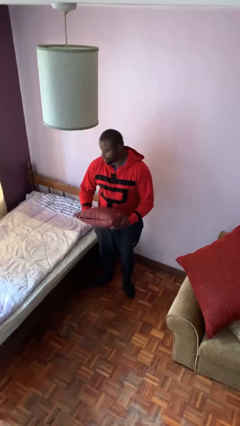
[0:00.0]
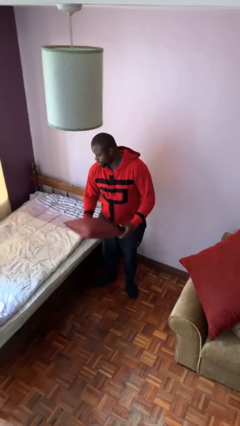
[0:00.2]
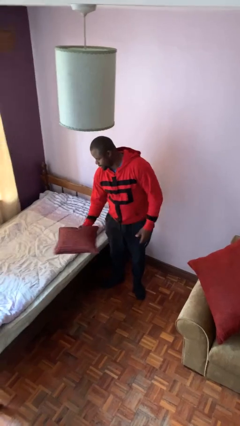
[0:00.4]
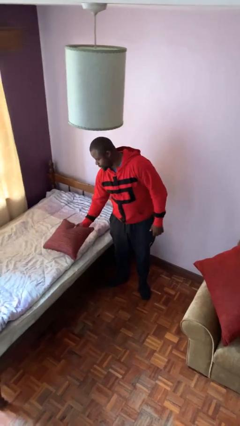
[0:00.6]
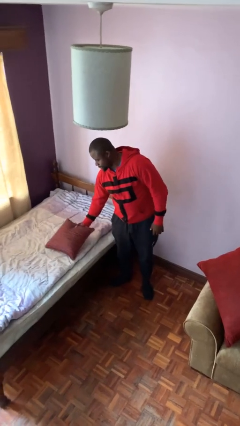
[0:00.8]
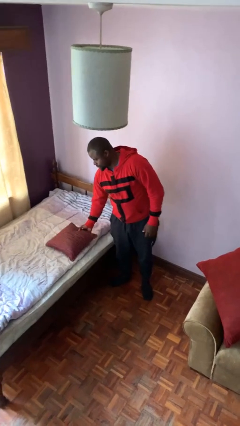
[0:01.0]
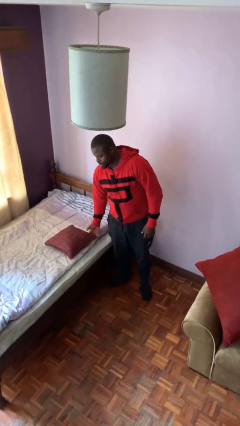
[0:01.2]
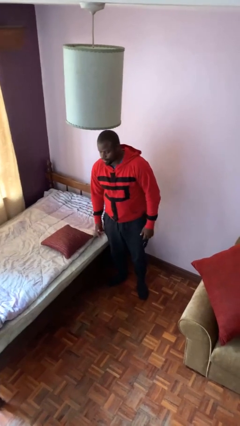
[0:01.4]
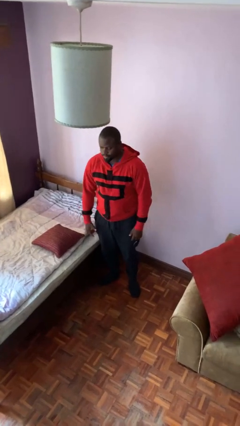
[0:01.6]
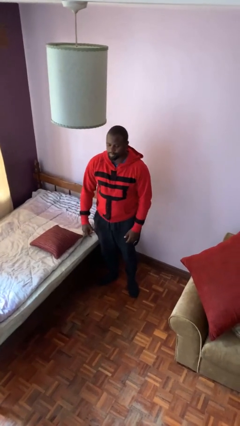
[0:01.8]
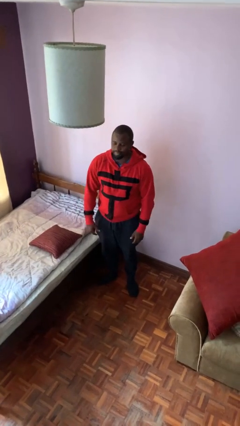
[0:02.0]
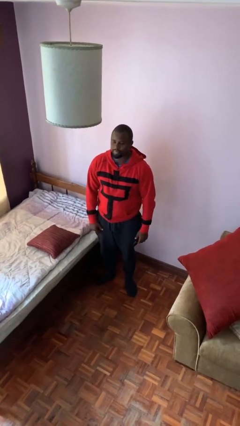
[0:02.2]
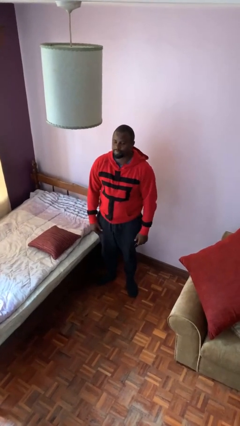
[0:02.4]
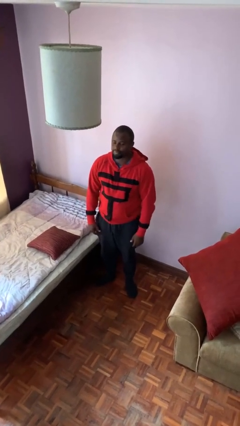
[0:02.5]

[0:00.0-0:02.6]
person puts down object on bed

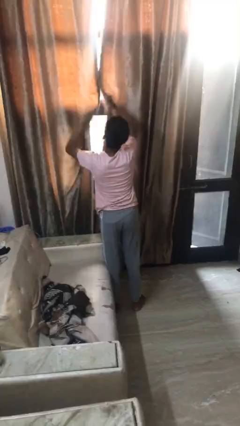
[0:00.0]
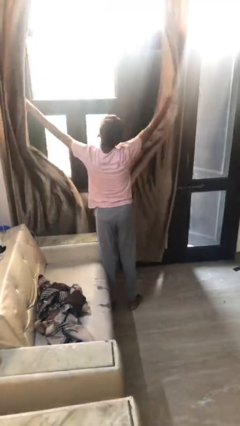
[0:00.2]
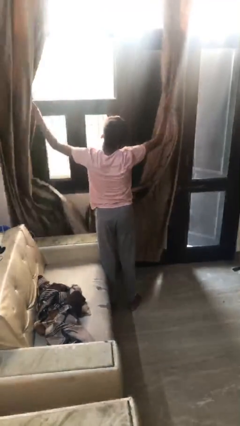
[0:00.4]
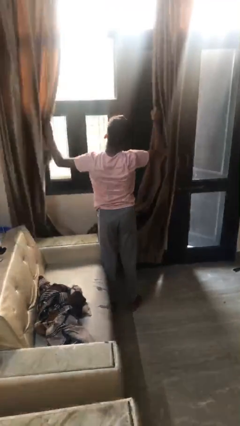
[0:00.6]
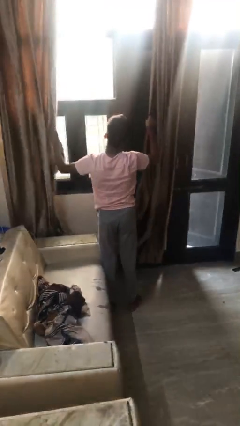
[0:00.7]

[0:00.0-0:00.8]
person opens curtains

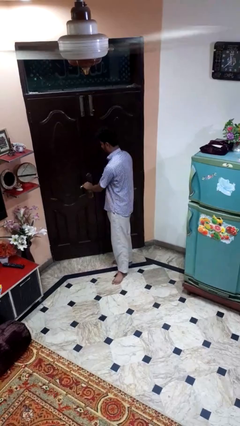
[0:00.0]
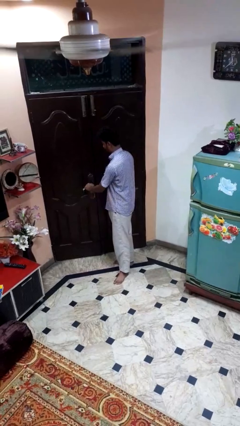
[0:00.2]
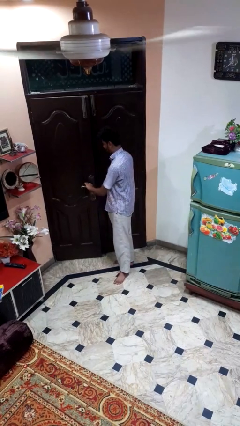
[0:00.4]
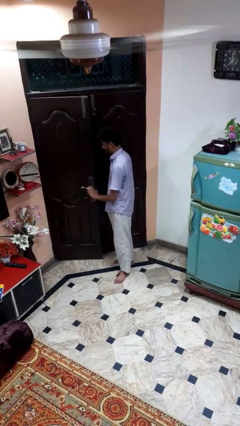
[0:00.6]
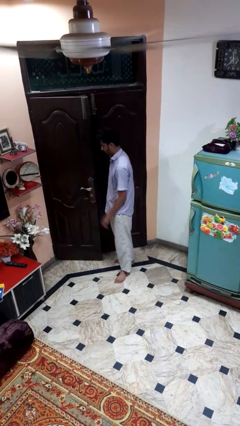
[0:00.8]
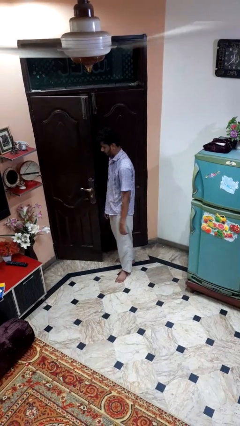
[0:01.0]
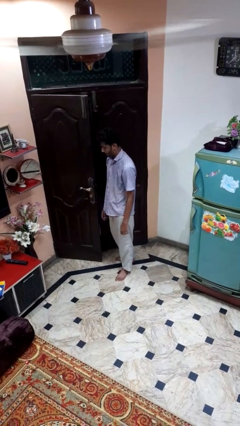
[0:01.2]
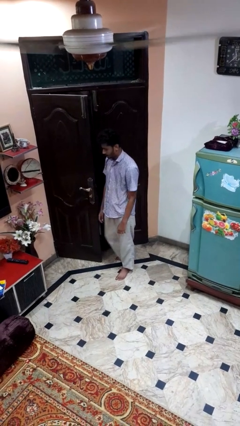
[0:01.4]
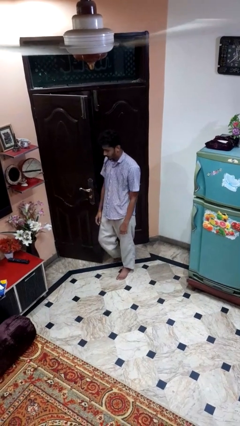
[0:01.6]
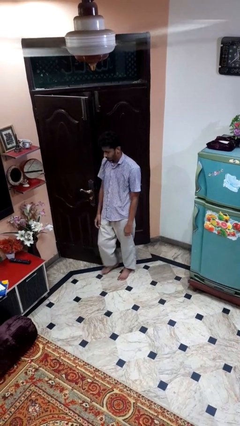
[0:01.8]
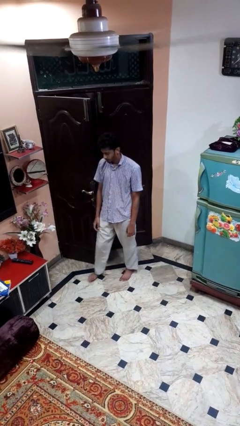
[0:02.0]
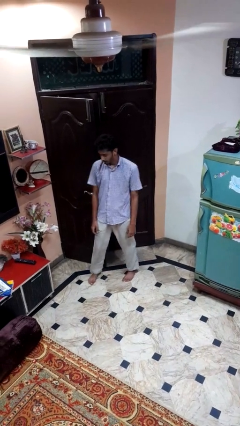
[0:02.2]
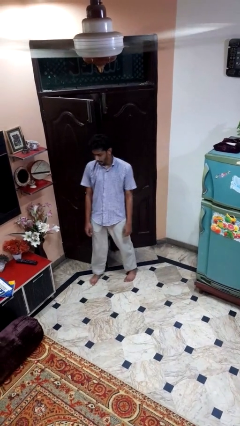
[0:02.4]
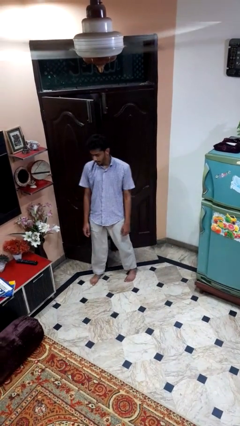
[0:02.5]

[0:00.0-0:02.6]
person opens facility door

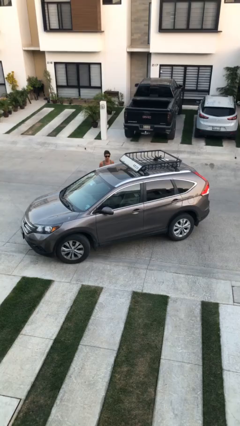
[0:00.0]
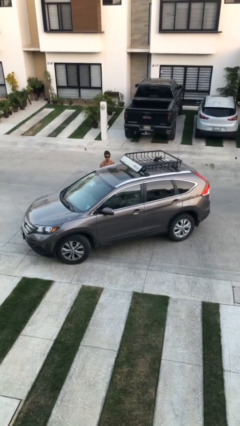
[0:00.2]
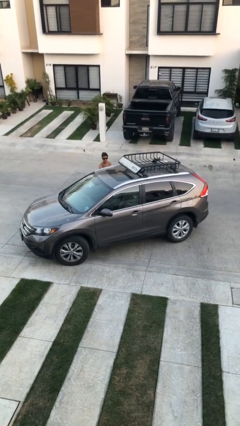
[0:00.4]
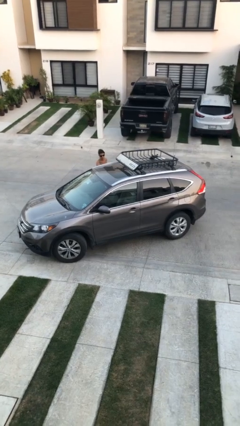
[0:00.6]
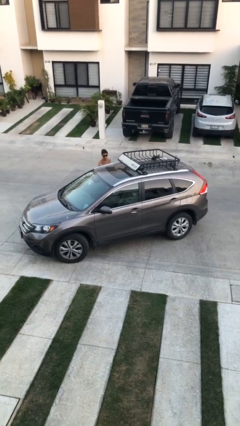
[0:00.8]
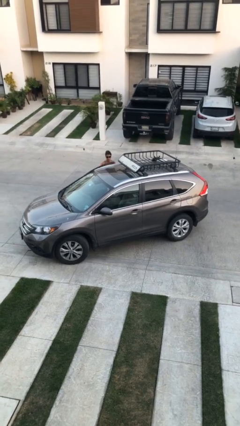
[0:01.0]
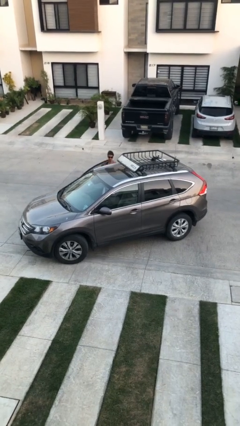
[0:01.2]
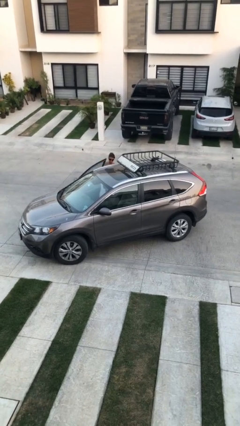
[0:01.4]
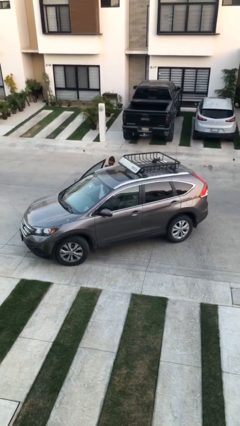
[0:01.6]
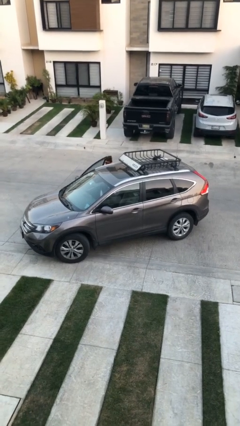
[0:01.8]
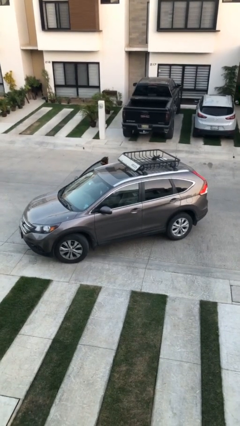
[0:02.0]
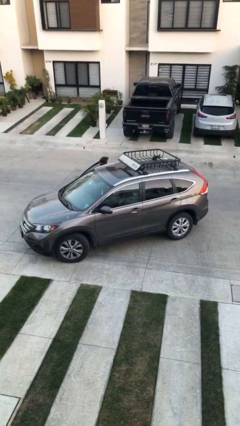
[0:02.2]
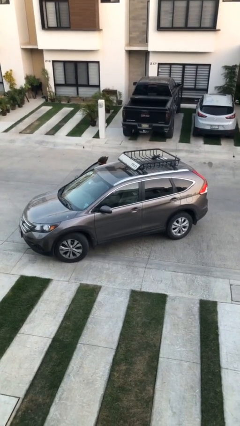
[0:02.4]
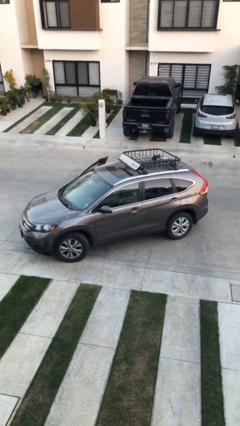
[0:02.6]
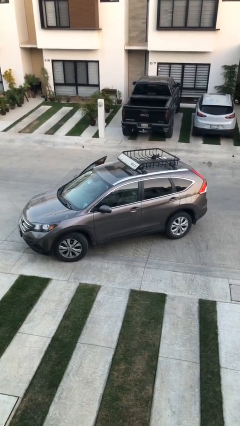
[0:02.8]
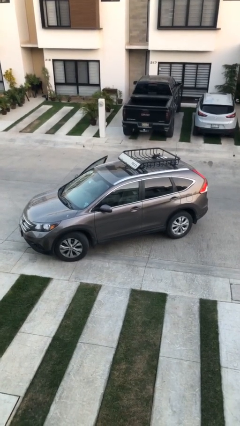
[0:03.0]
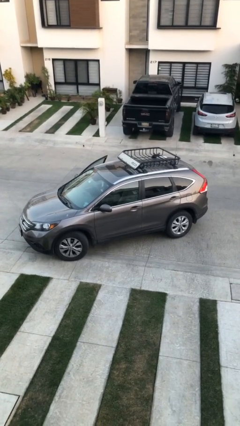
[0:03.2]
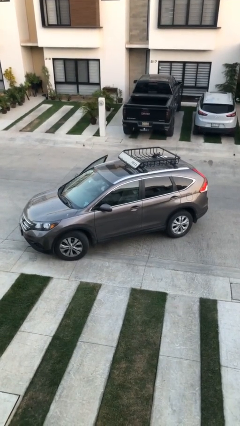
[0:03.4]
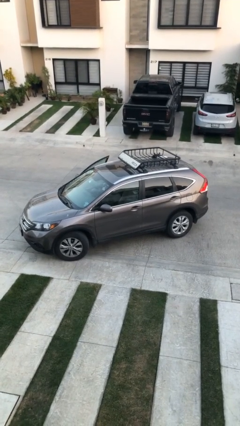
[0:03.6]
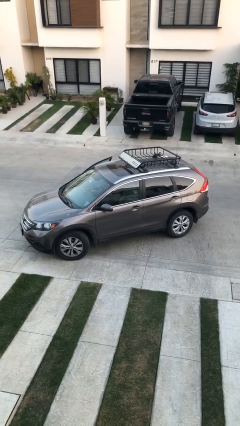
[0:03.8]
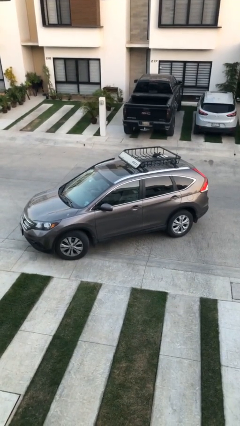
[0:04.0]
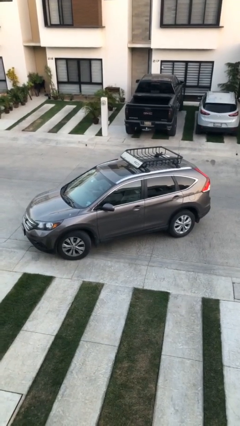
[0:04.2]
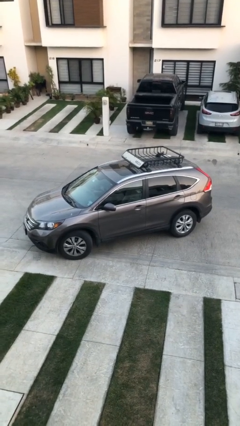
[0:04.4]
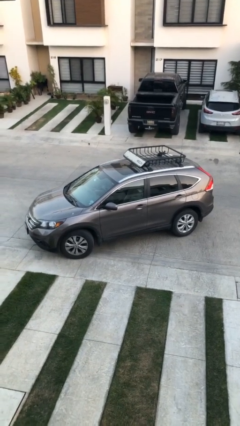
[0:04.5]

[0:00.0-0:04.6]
car picks up person

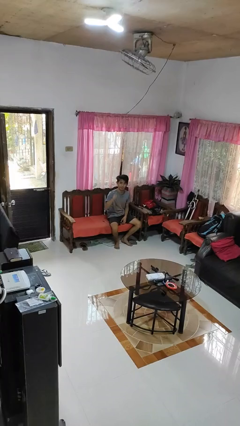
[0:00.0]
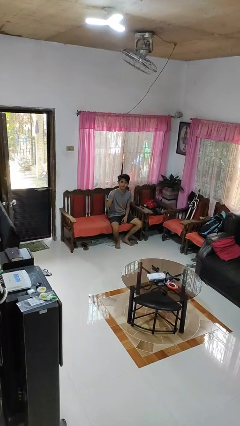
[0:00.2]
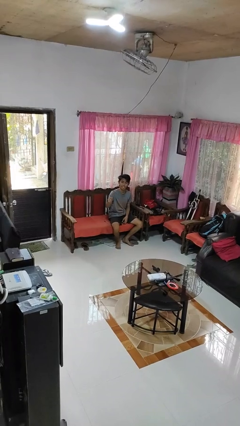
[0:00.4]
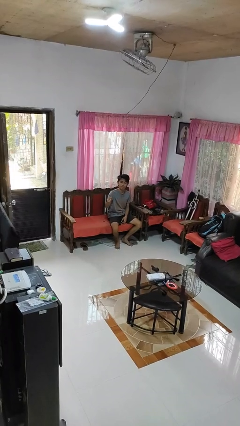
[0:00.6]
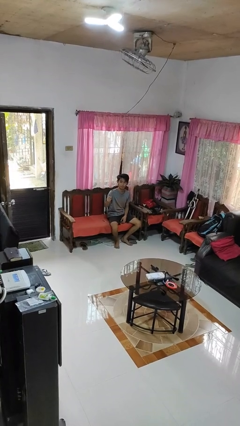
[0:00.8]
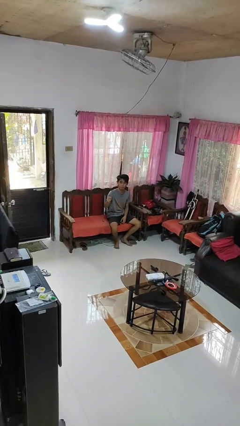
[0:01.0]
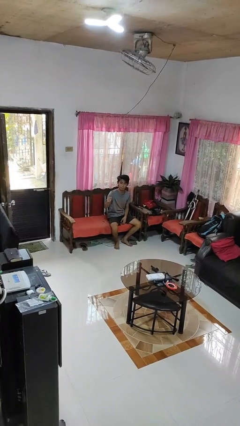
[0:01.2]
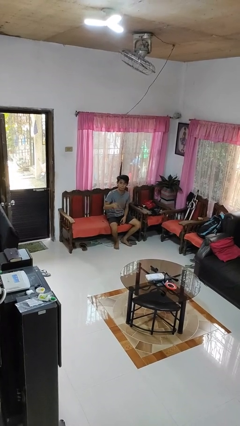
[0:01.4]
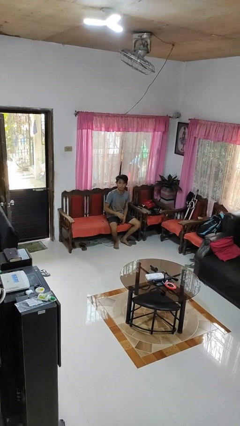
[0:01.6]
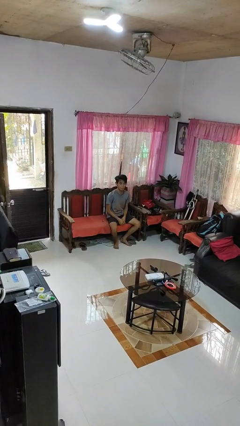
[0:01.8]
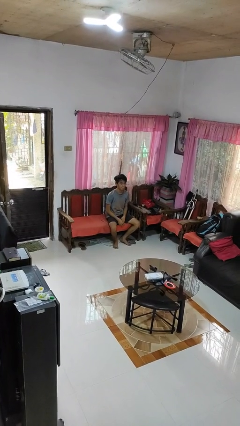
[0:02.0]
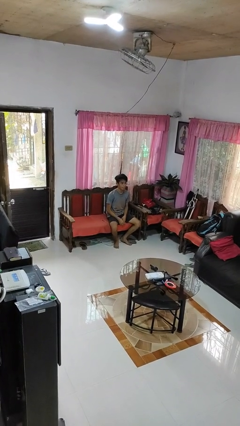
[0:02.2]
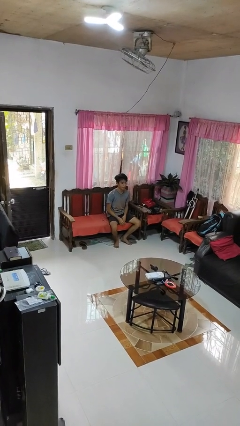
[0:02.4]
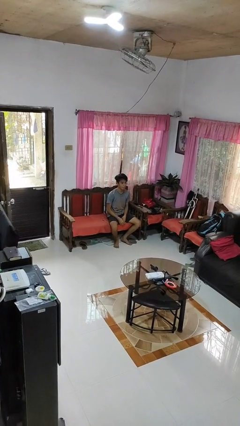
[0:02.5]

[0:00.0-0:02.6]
person gestures thumbs up

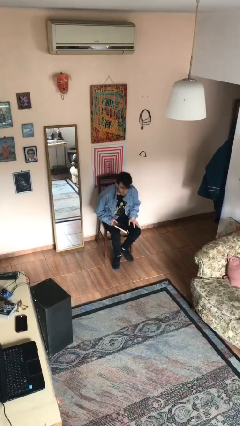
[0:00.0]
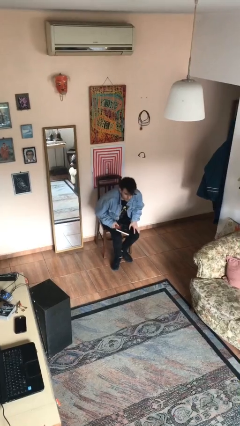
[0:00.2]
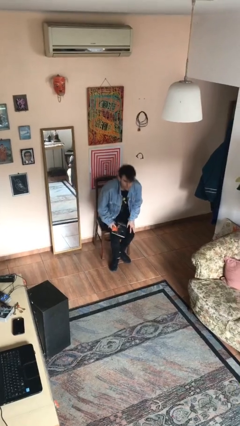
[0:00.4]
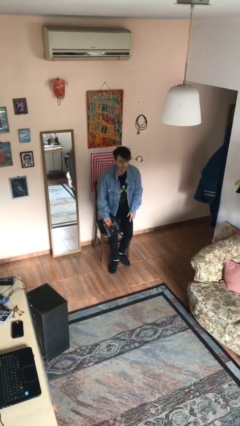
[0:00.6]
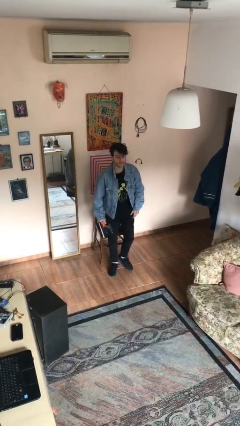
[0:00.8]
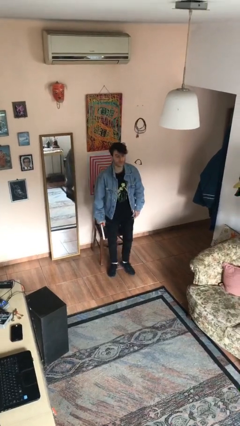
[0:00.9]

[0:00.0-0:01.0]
person stands up

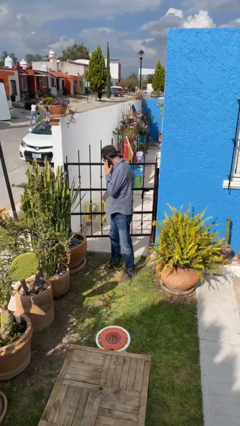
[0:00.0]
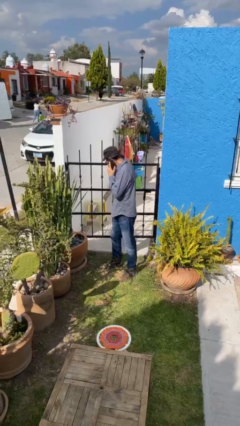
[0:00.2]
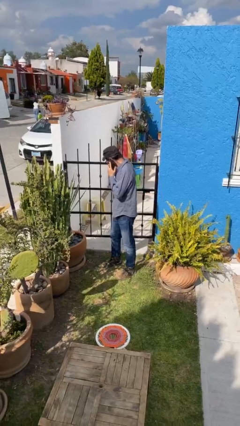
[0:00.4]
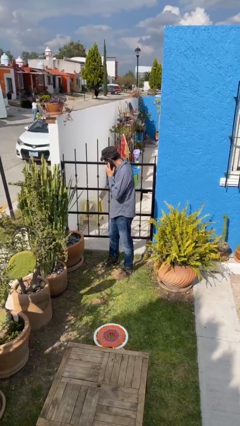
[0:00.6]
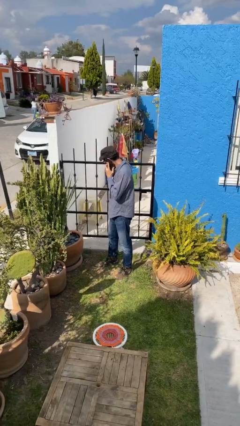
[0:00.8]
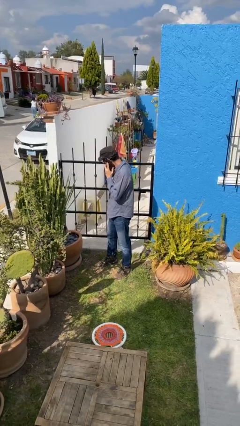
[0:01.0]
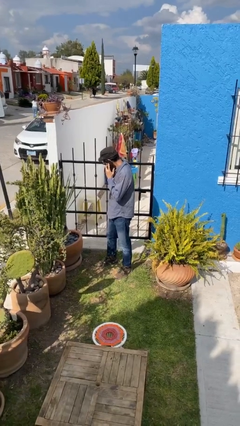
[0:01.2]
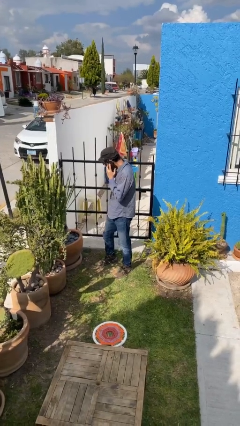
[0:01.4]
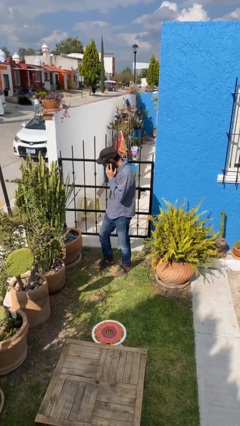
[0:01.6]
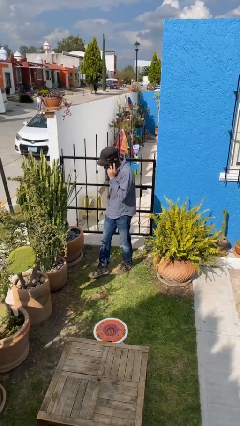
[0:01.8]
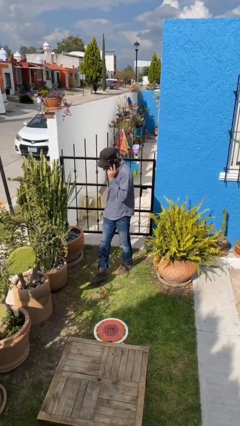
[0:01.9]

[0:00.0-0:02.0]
person closes facility door

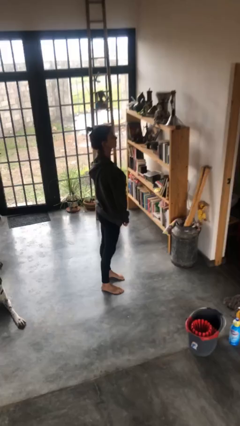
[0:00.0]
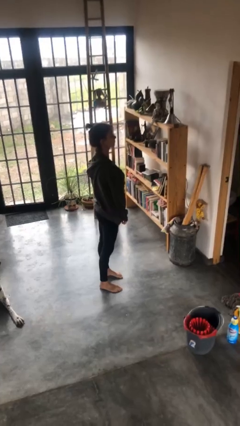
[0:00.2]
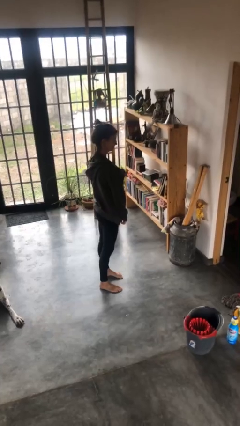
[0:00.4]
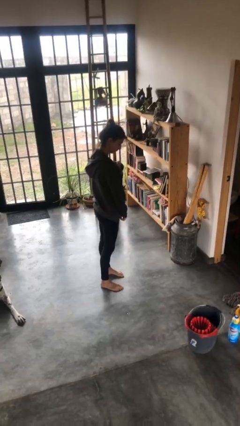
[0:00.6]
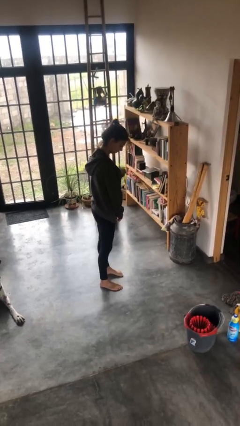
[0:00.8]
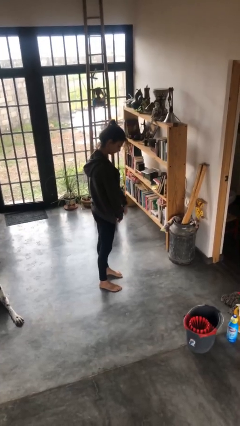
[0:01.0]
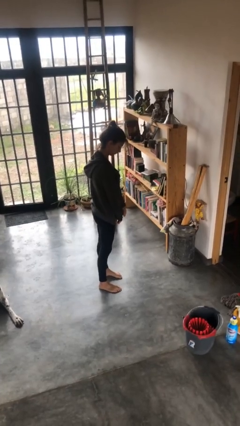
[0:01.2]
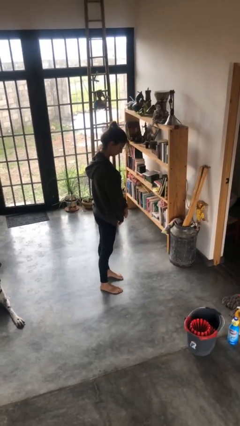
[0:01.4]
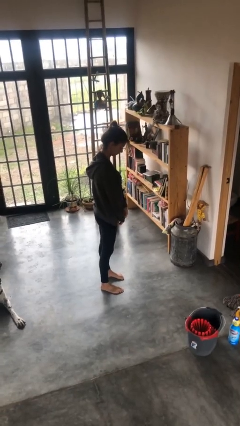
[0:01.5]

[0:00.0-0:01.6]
person unzips jacket
